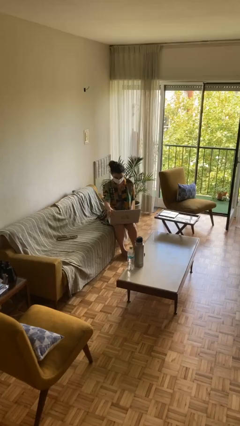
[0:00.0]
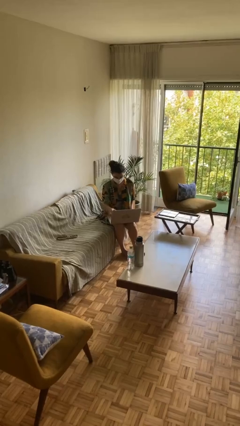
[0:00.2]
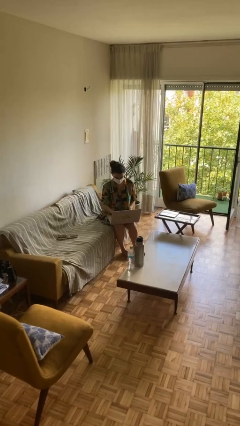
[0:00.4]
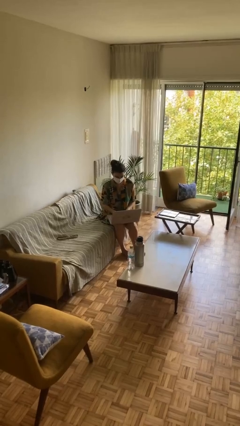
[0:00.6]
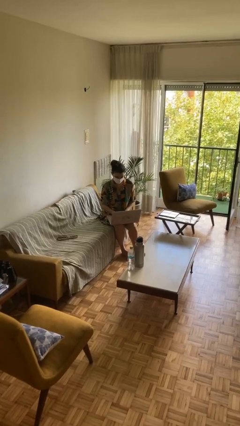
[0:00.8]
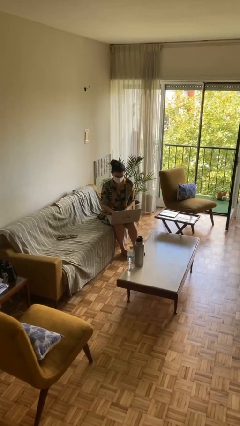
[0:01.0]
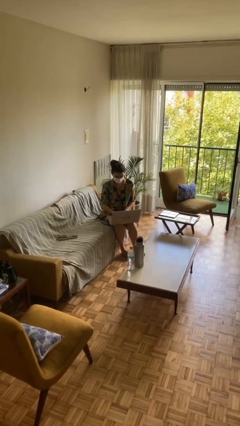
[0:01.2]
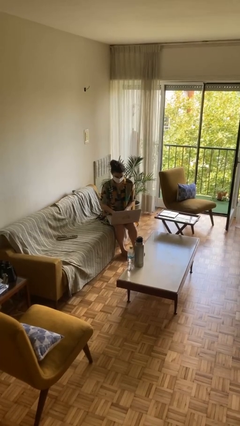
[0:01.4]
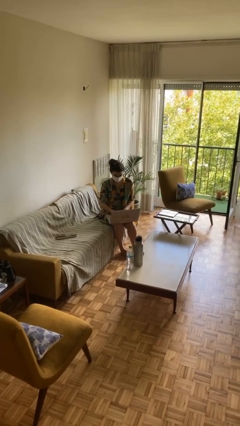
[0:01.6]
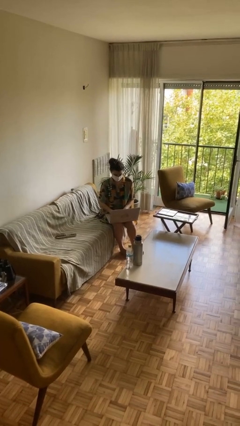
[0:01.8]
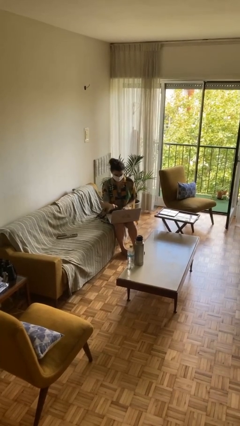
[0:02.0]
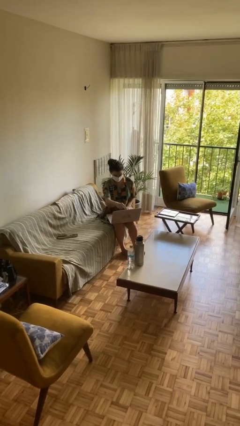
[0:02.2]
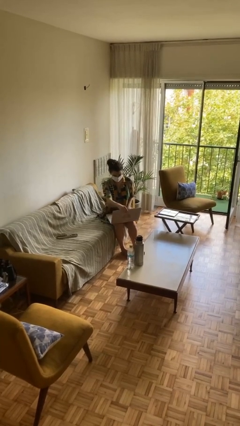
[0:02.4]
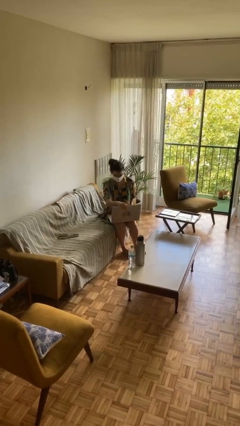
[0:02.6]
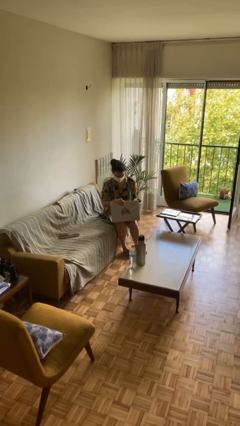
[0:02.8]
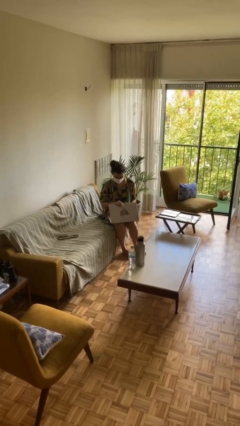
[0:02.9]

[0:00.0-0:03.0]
person interacts with laptop

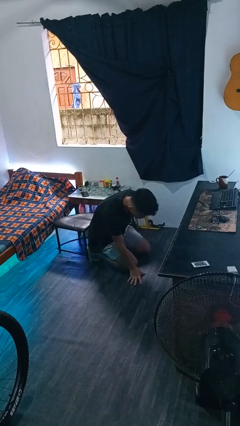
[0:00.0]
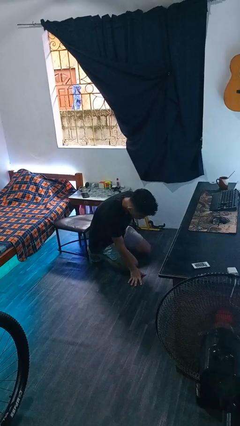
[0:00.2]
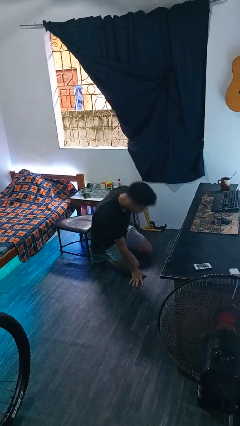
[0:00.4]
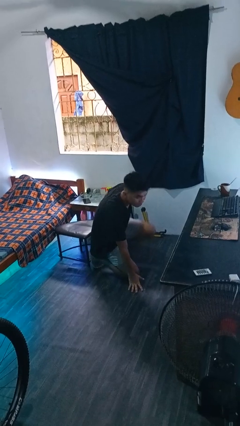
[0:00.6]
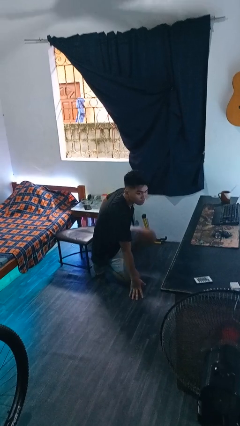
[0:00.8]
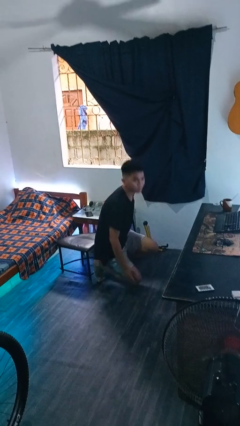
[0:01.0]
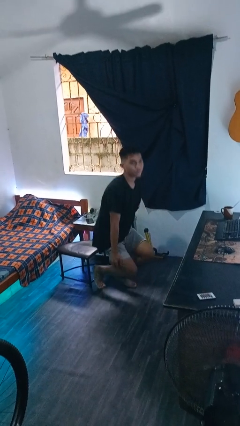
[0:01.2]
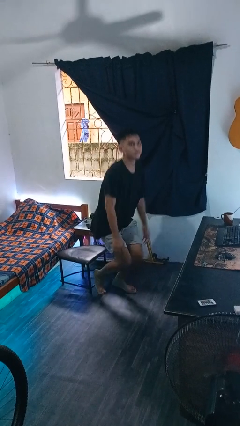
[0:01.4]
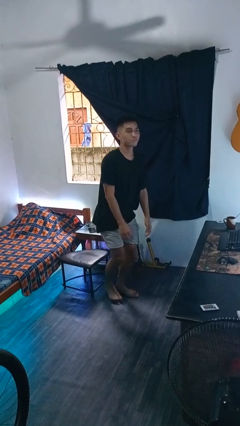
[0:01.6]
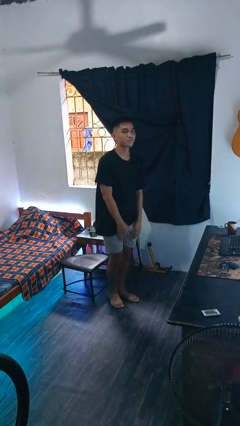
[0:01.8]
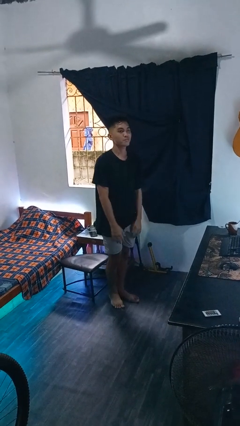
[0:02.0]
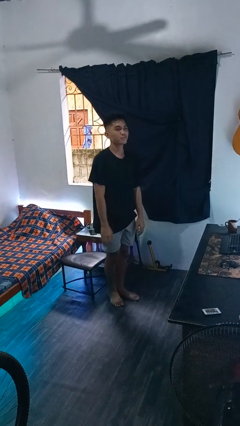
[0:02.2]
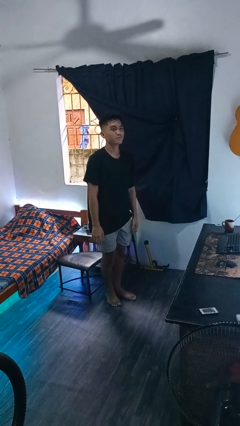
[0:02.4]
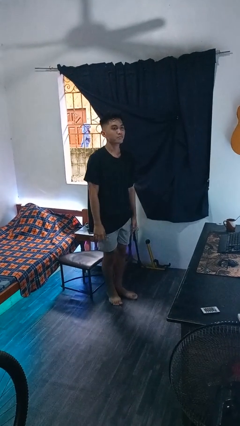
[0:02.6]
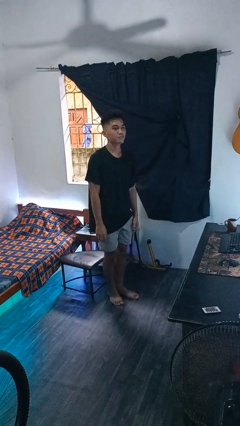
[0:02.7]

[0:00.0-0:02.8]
person stands up from floor

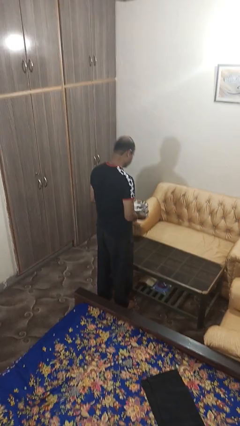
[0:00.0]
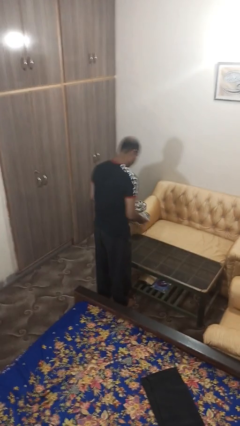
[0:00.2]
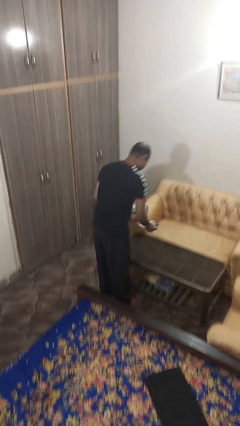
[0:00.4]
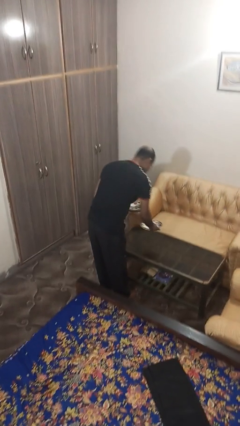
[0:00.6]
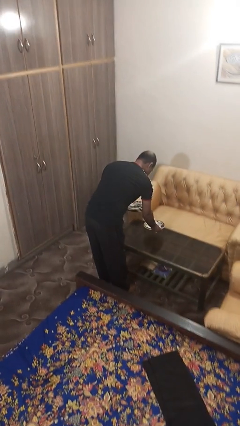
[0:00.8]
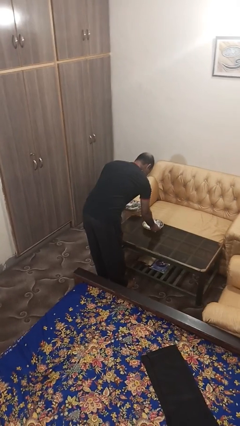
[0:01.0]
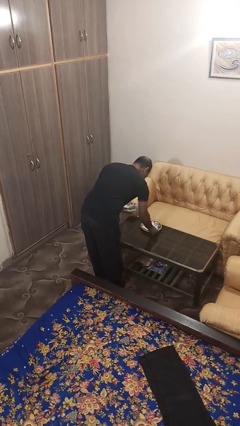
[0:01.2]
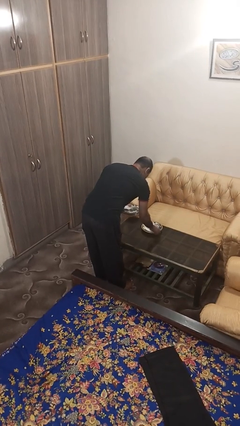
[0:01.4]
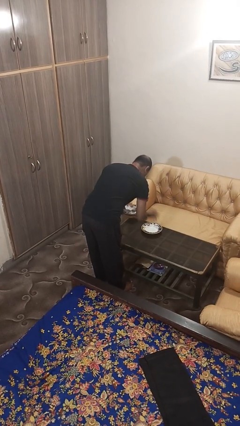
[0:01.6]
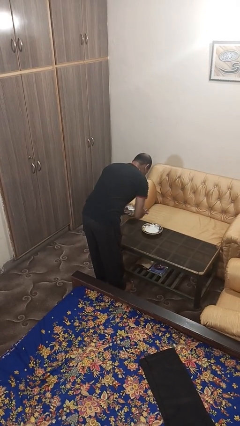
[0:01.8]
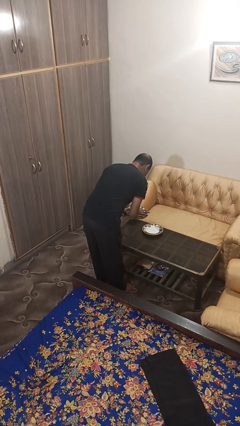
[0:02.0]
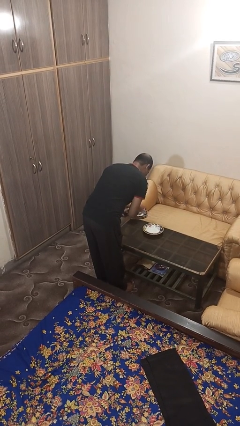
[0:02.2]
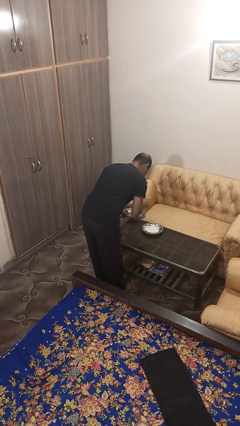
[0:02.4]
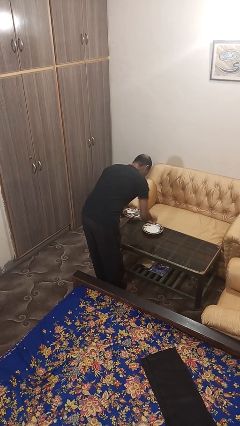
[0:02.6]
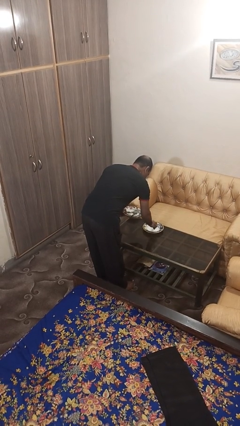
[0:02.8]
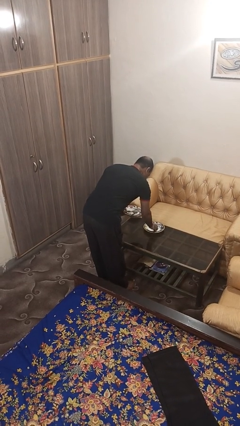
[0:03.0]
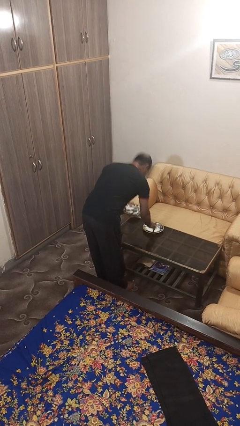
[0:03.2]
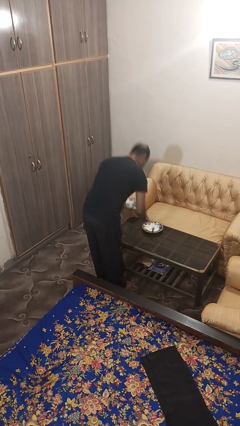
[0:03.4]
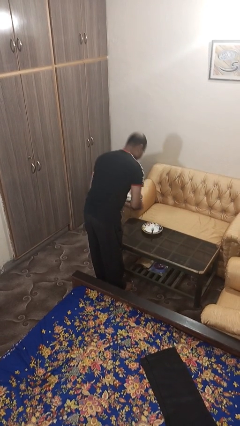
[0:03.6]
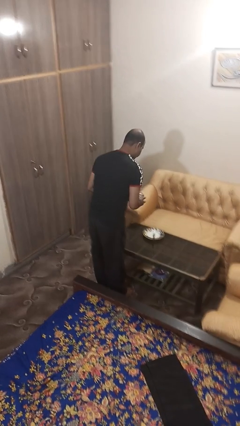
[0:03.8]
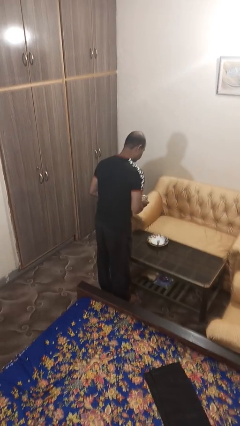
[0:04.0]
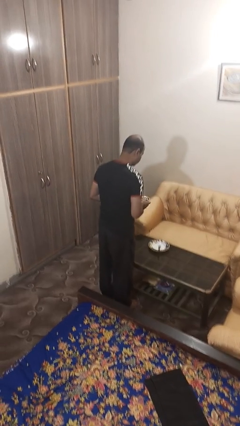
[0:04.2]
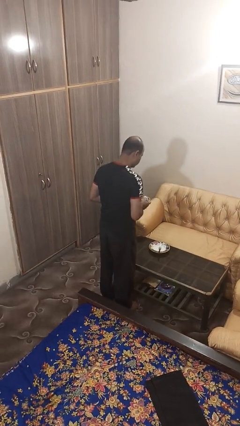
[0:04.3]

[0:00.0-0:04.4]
person sets table

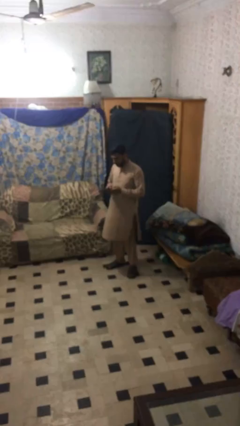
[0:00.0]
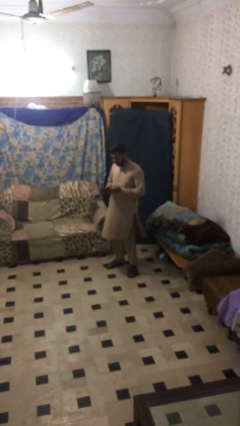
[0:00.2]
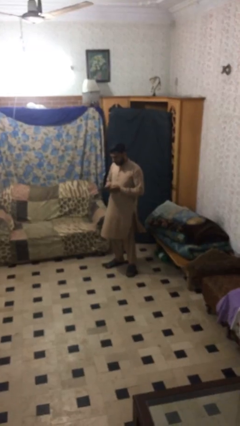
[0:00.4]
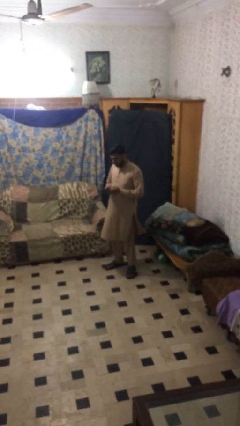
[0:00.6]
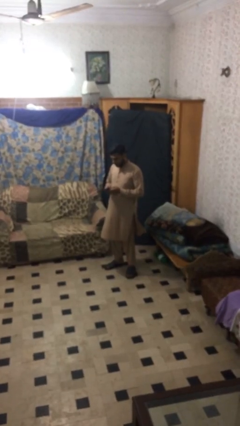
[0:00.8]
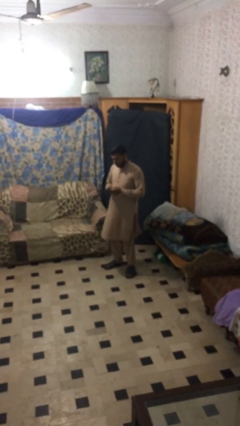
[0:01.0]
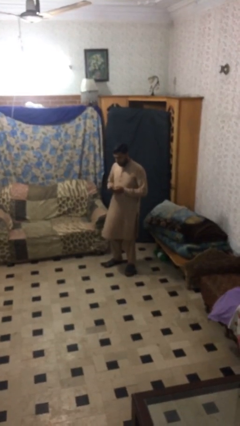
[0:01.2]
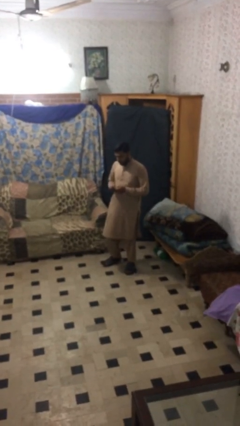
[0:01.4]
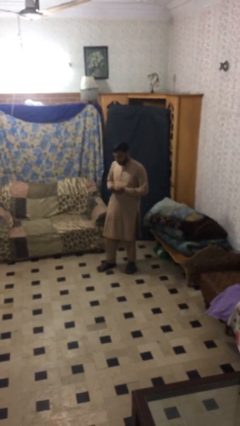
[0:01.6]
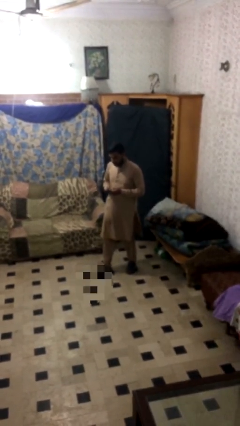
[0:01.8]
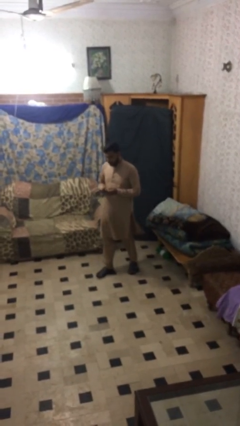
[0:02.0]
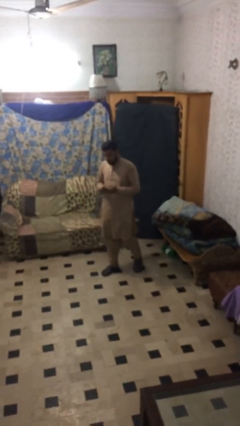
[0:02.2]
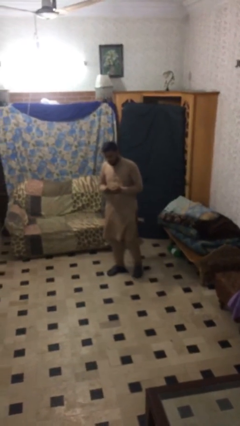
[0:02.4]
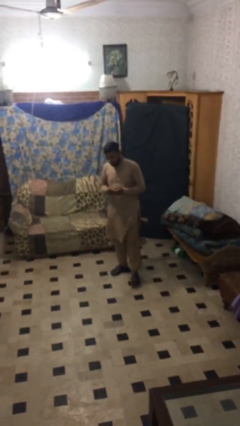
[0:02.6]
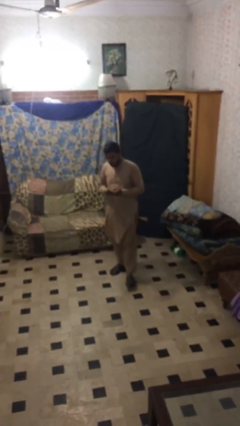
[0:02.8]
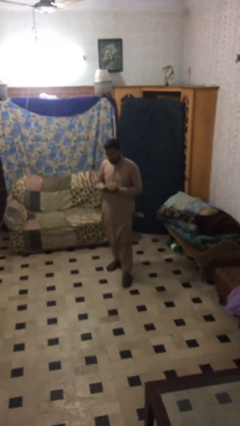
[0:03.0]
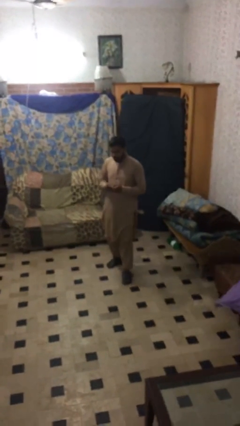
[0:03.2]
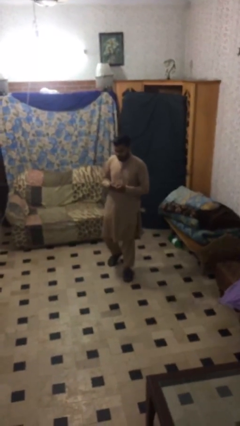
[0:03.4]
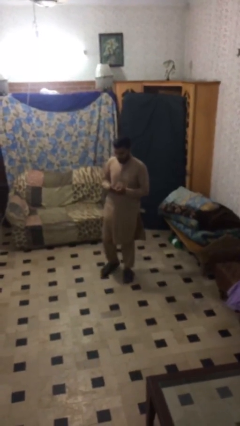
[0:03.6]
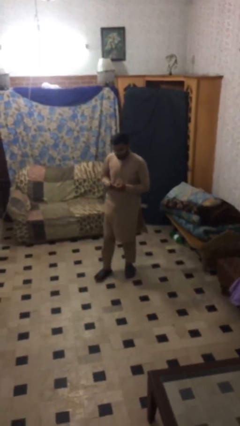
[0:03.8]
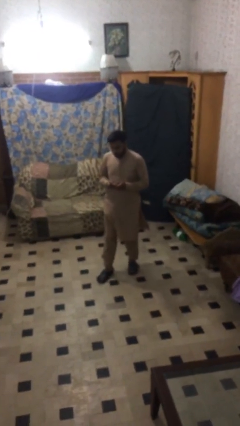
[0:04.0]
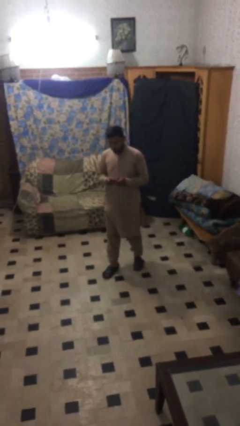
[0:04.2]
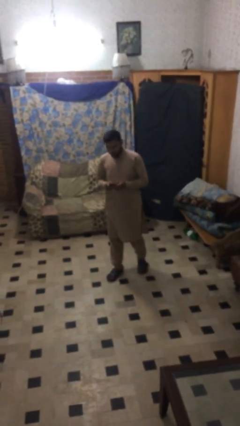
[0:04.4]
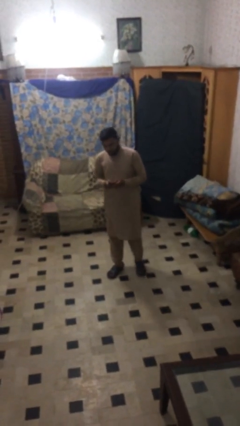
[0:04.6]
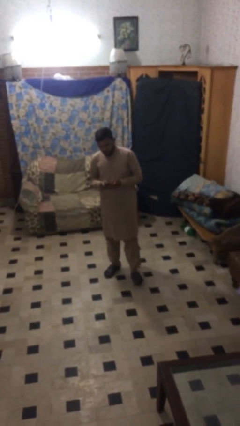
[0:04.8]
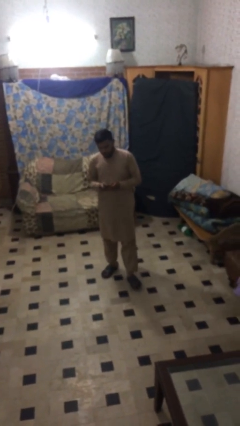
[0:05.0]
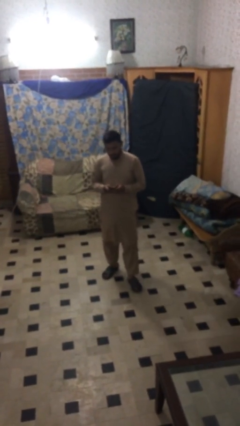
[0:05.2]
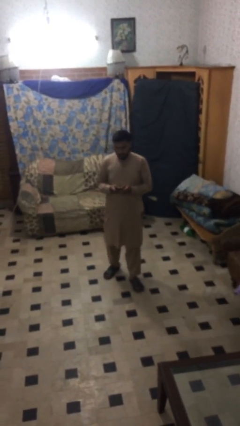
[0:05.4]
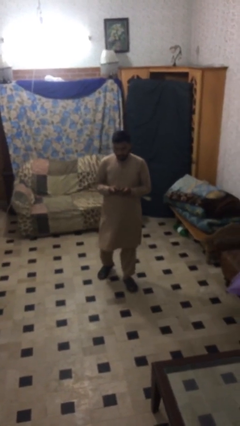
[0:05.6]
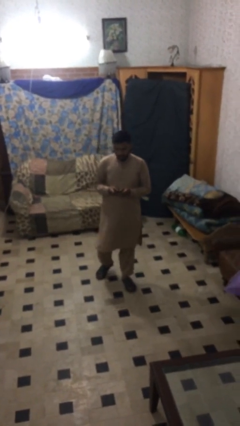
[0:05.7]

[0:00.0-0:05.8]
person texts on phone

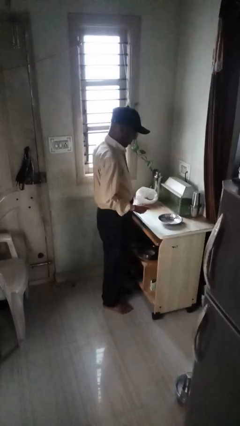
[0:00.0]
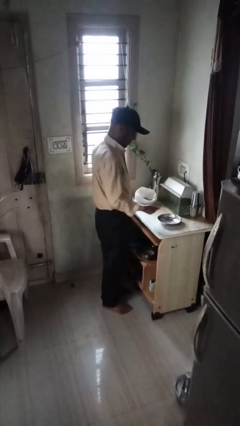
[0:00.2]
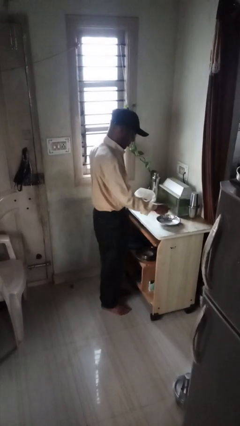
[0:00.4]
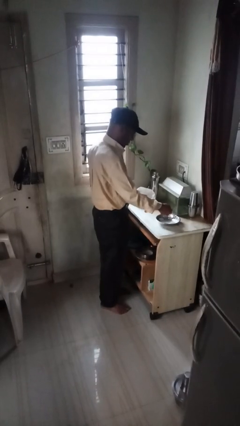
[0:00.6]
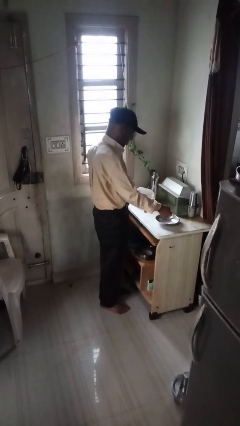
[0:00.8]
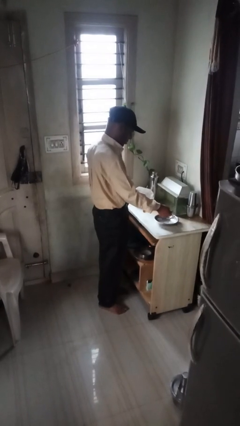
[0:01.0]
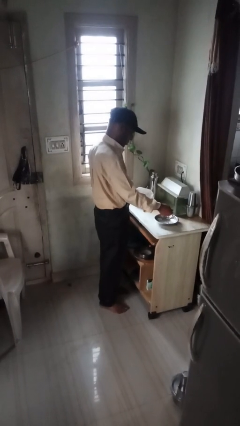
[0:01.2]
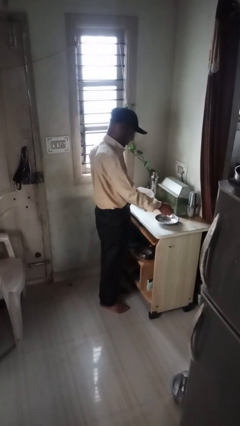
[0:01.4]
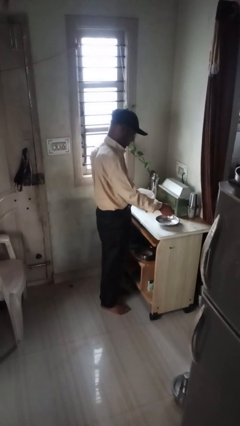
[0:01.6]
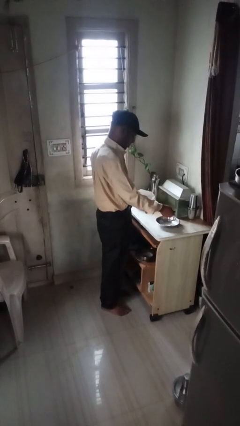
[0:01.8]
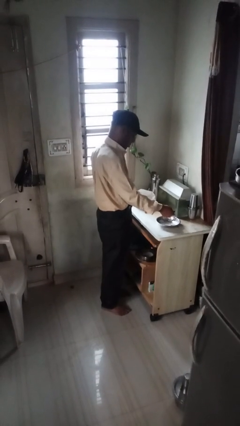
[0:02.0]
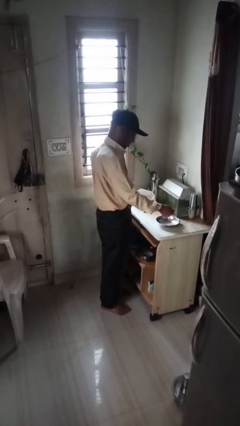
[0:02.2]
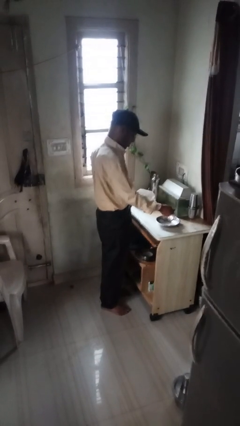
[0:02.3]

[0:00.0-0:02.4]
person pours into bowl
